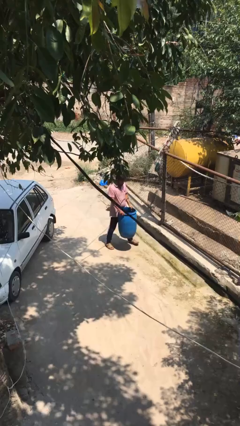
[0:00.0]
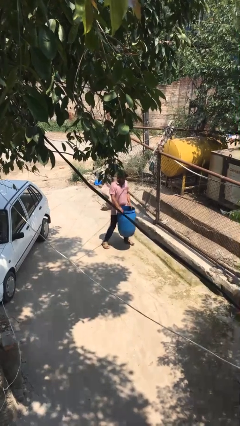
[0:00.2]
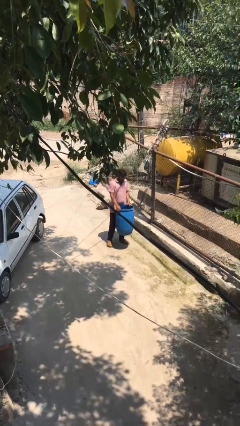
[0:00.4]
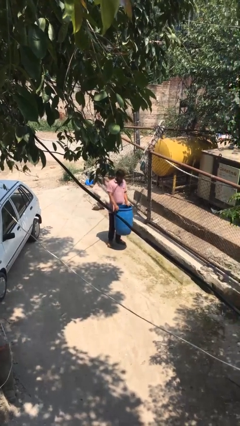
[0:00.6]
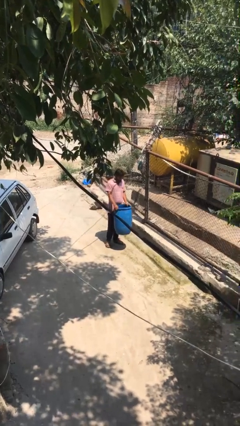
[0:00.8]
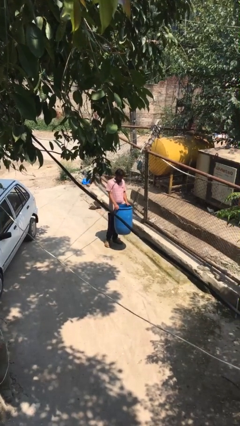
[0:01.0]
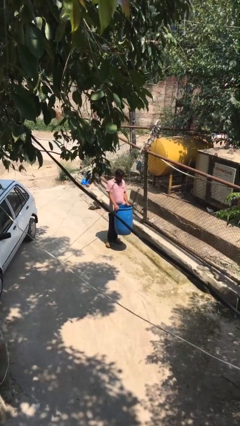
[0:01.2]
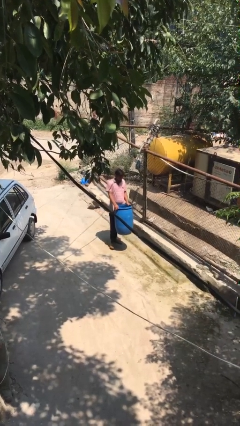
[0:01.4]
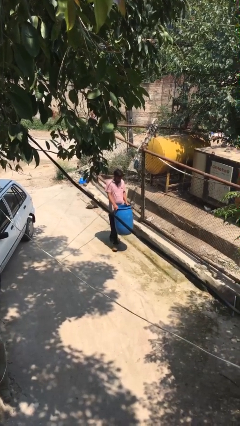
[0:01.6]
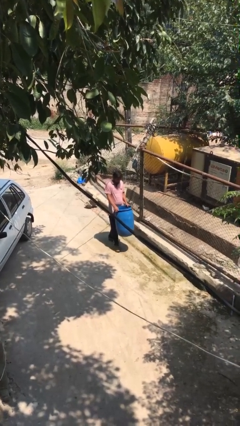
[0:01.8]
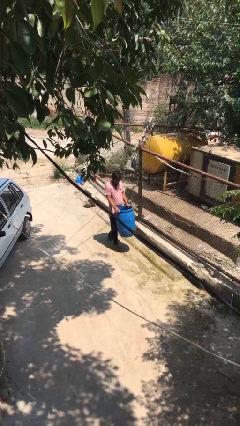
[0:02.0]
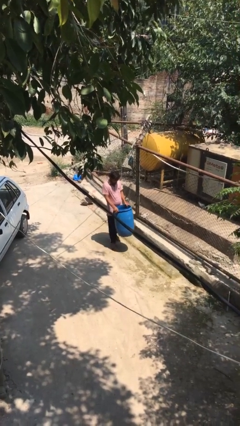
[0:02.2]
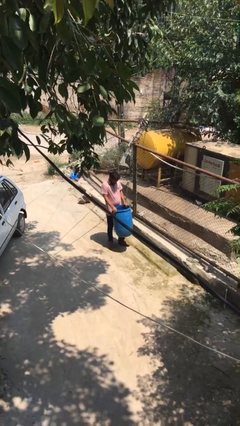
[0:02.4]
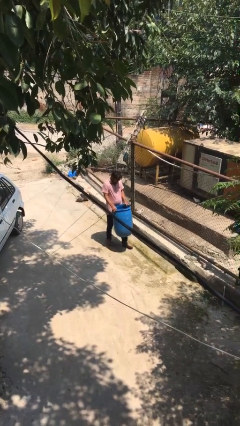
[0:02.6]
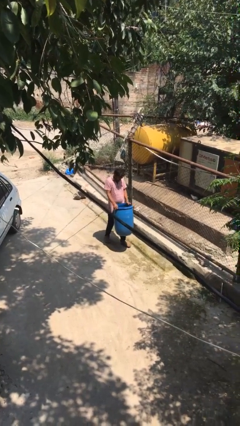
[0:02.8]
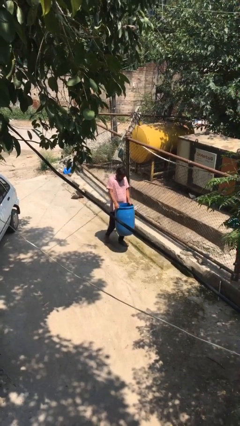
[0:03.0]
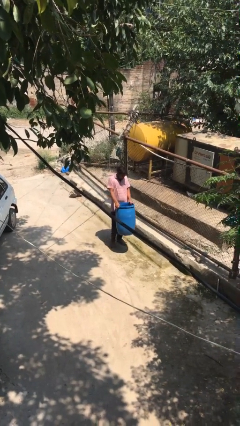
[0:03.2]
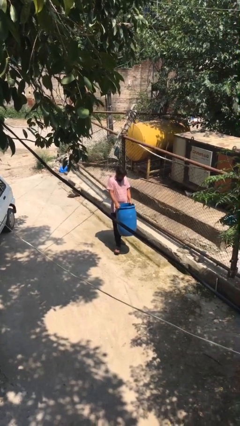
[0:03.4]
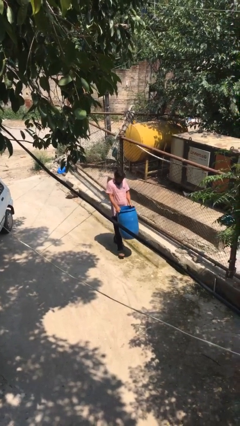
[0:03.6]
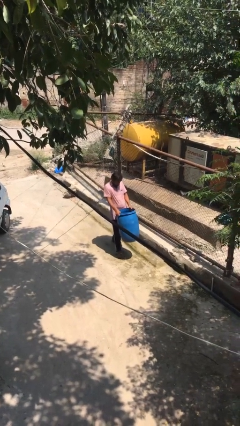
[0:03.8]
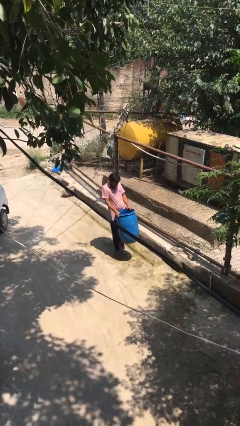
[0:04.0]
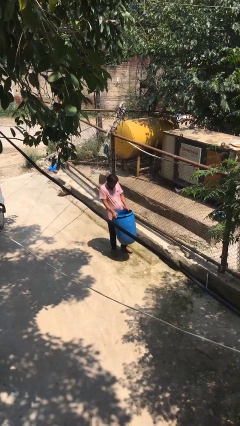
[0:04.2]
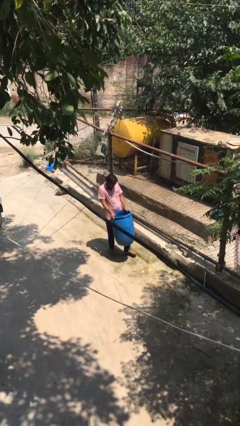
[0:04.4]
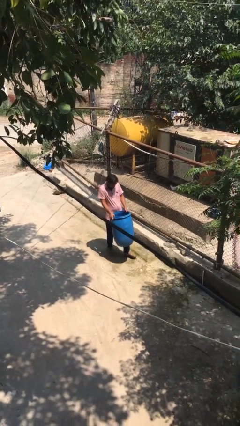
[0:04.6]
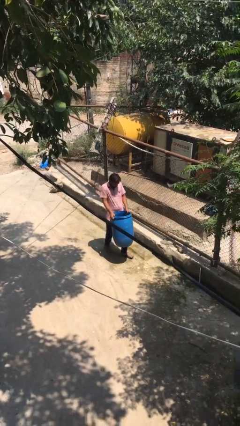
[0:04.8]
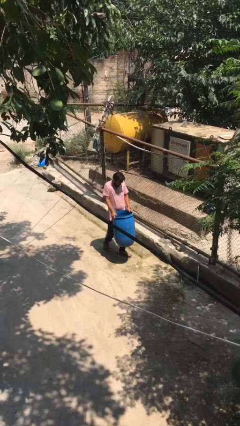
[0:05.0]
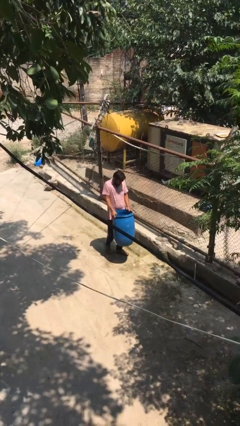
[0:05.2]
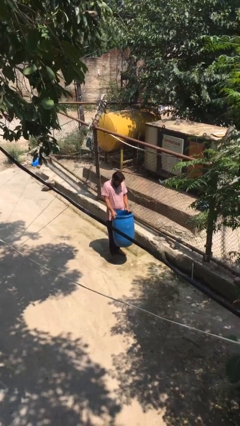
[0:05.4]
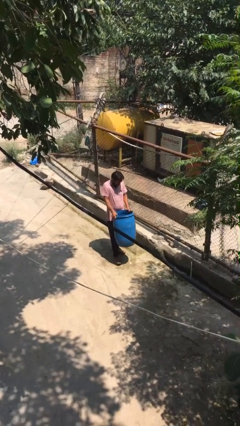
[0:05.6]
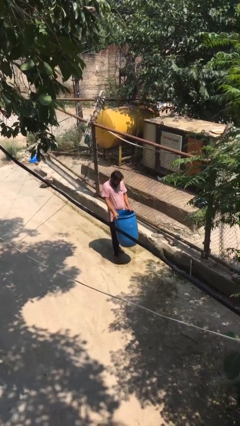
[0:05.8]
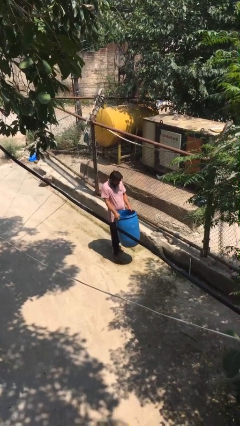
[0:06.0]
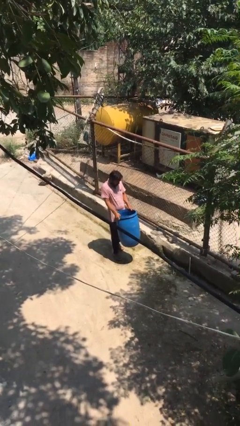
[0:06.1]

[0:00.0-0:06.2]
person carries heavy object

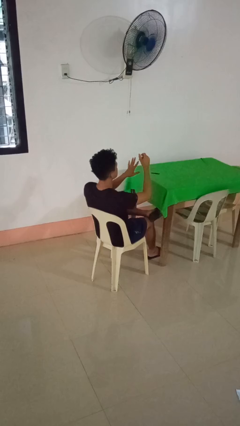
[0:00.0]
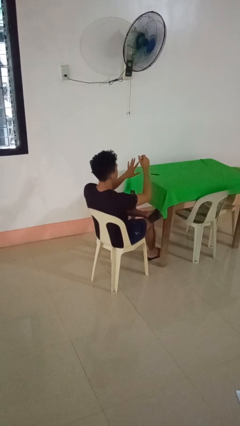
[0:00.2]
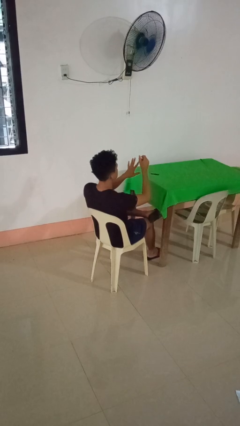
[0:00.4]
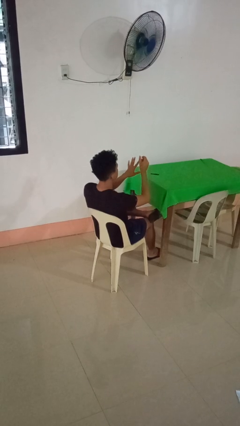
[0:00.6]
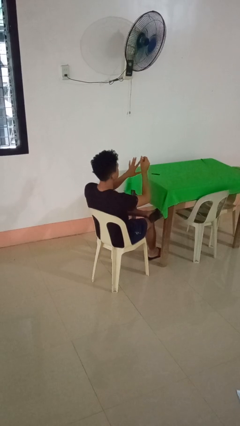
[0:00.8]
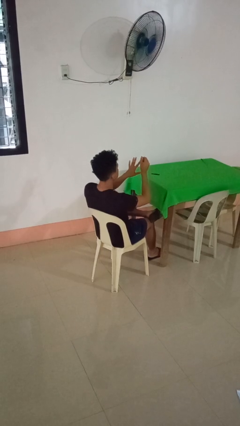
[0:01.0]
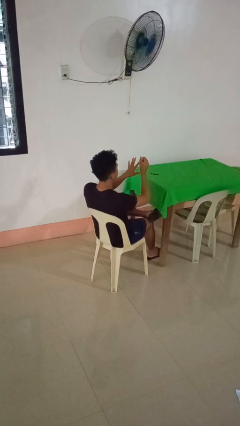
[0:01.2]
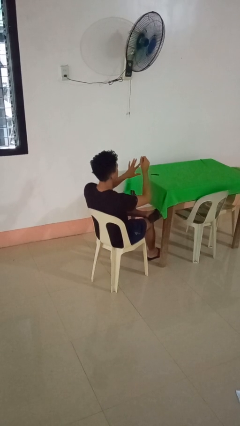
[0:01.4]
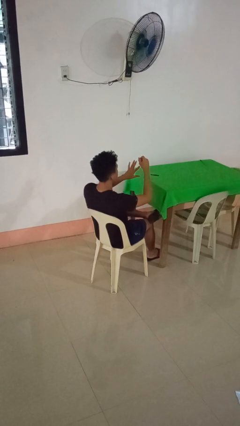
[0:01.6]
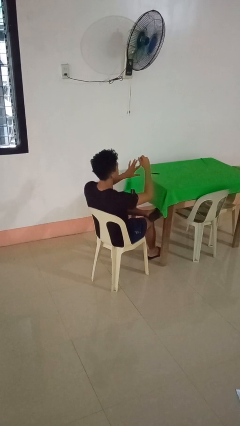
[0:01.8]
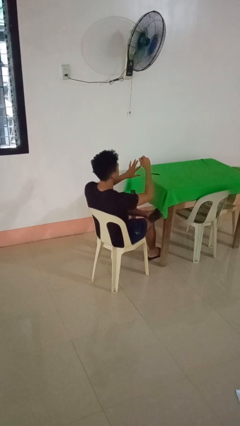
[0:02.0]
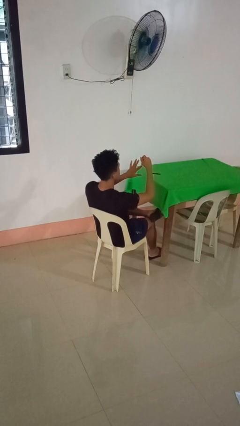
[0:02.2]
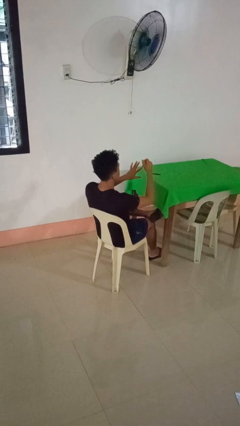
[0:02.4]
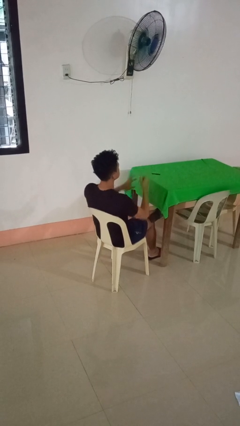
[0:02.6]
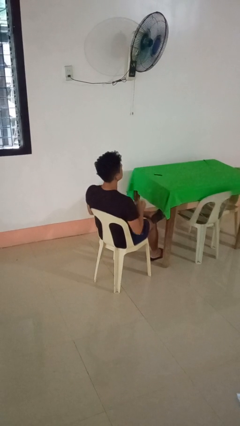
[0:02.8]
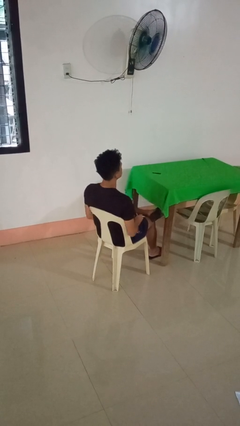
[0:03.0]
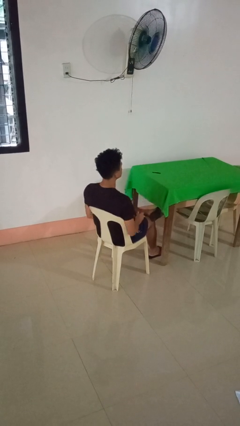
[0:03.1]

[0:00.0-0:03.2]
person clips fingernails

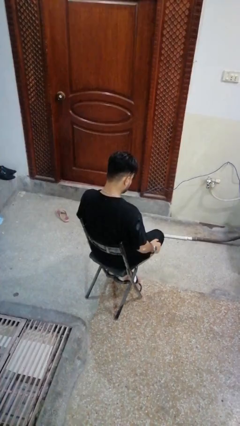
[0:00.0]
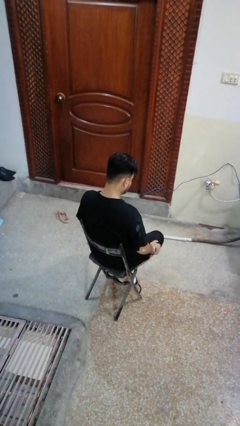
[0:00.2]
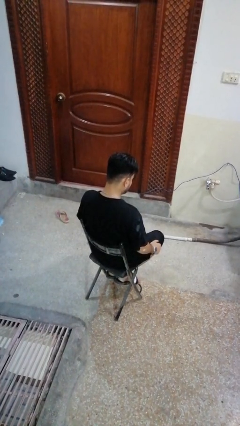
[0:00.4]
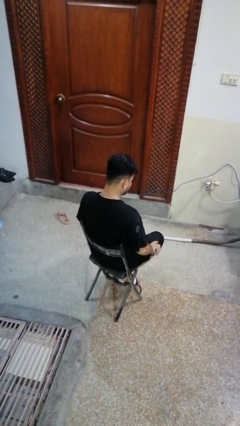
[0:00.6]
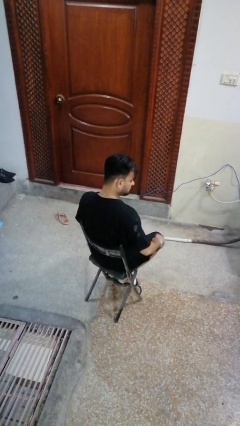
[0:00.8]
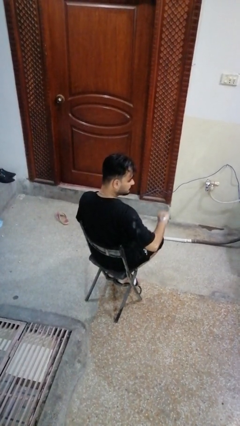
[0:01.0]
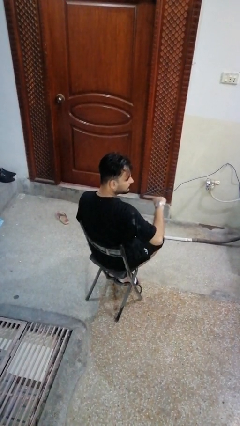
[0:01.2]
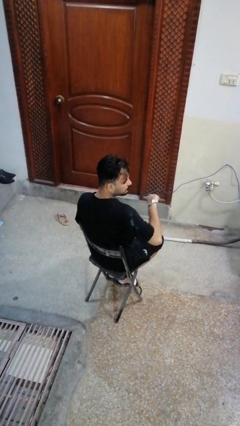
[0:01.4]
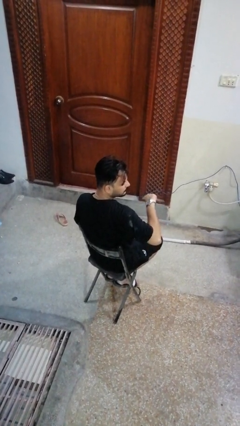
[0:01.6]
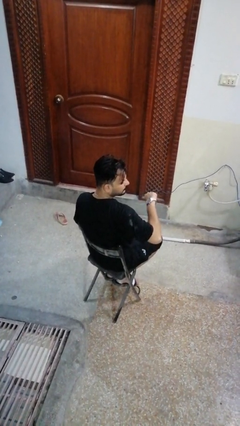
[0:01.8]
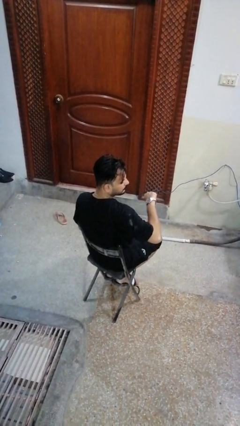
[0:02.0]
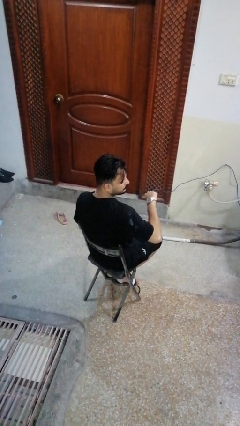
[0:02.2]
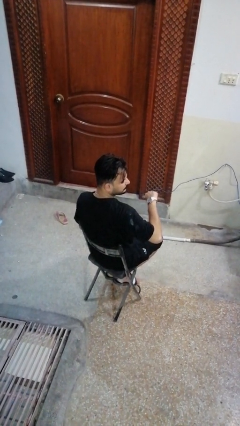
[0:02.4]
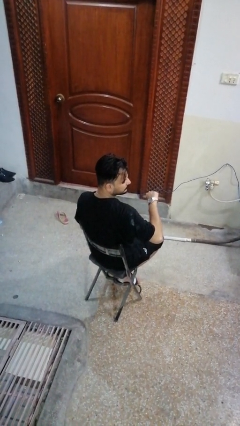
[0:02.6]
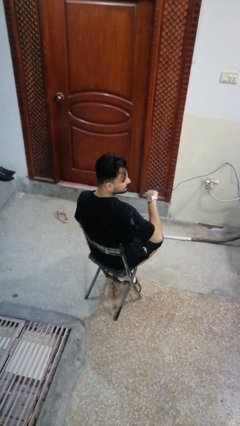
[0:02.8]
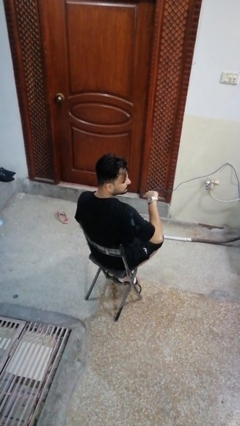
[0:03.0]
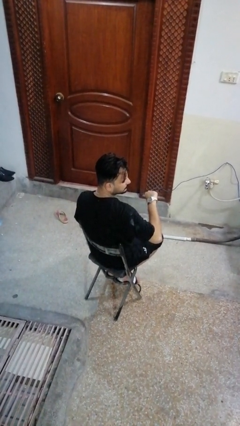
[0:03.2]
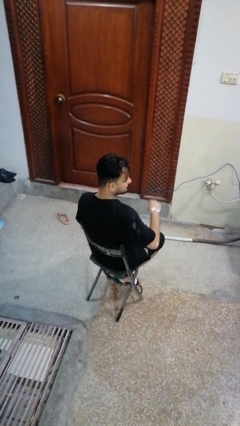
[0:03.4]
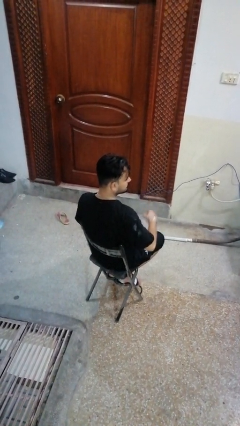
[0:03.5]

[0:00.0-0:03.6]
person looks at wristwatch

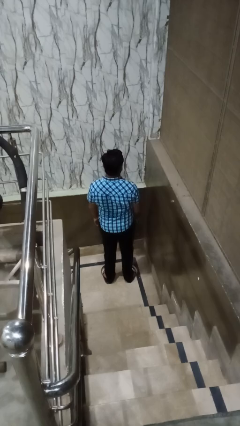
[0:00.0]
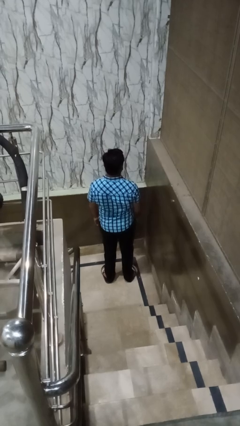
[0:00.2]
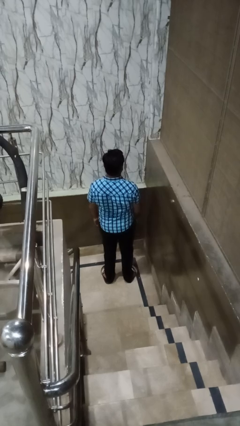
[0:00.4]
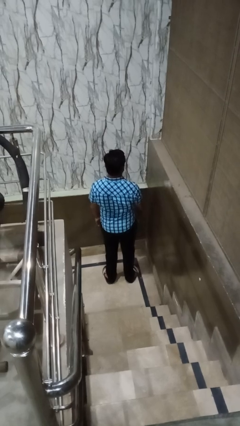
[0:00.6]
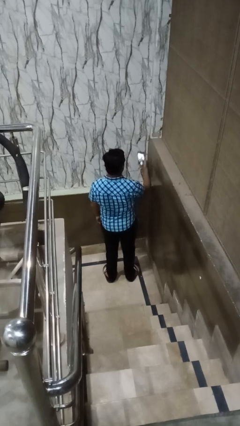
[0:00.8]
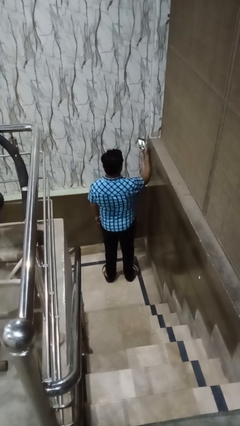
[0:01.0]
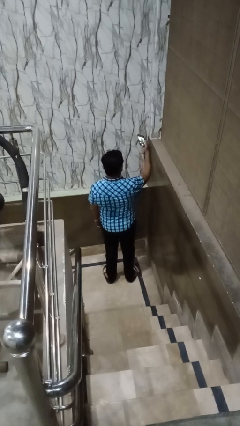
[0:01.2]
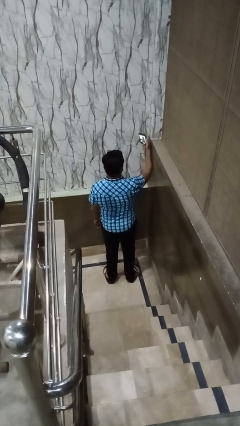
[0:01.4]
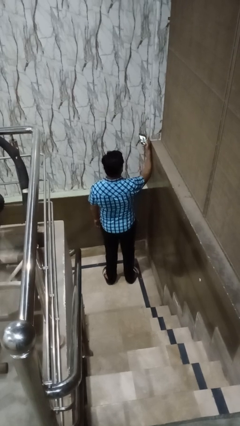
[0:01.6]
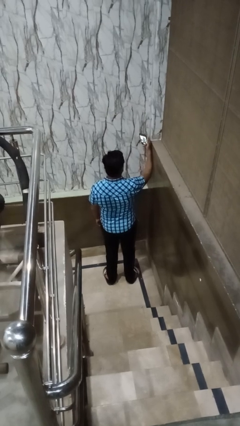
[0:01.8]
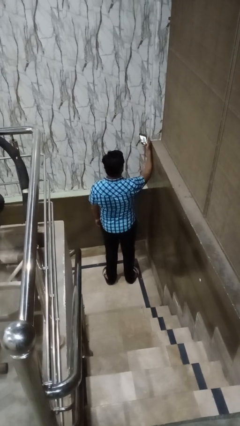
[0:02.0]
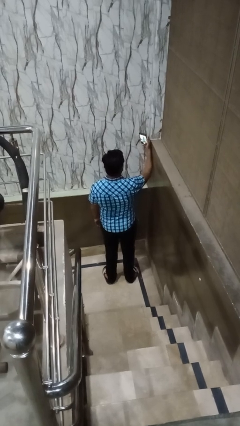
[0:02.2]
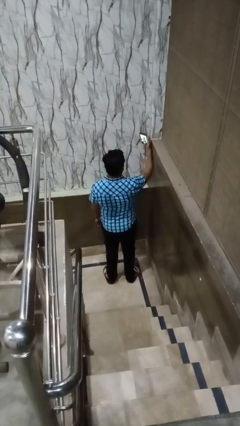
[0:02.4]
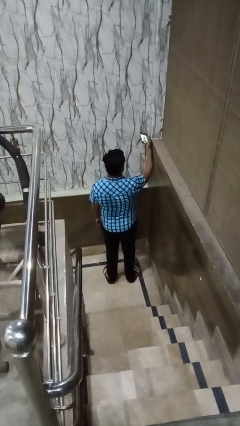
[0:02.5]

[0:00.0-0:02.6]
person takes selfie

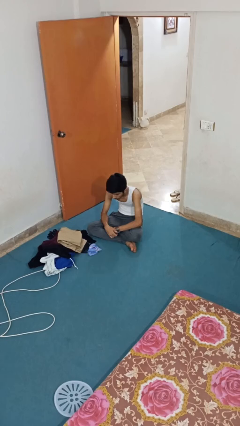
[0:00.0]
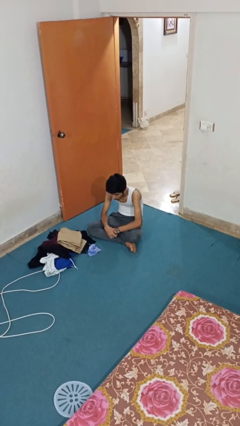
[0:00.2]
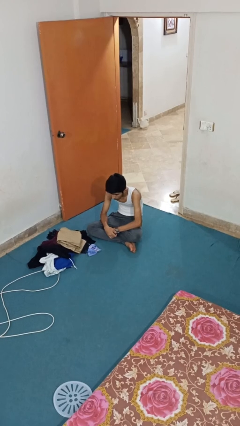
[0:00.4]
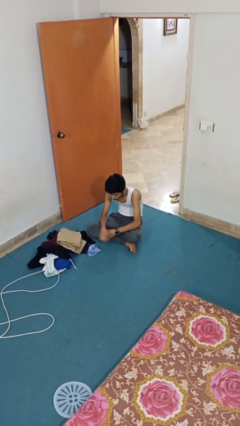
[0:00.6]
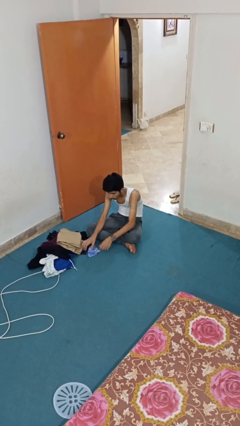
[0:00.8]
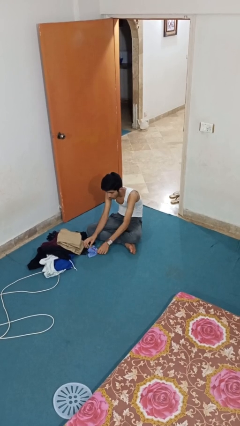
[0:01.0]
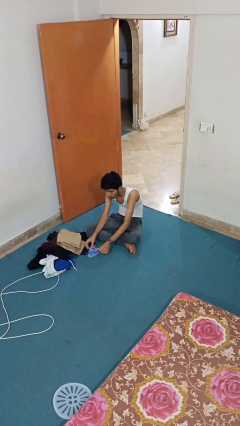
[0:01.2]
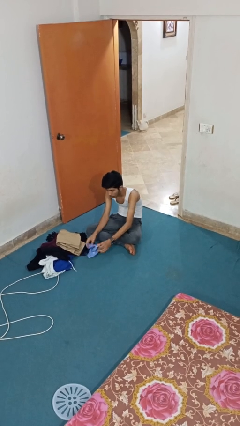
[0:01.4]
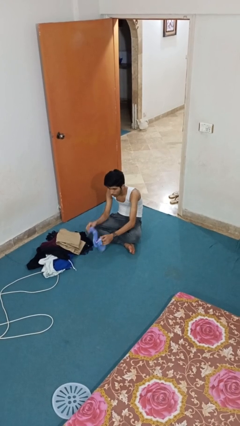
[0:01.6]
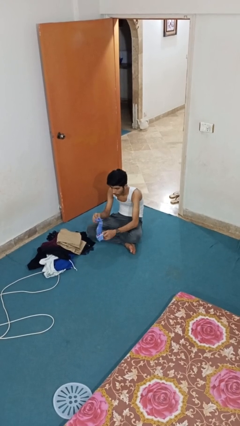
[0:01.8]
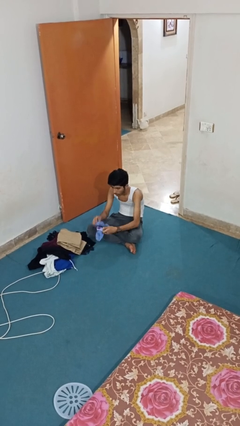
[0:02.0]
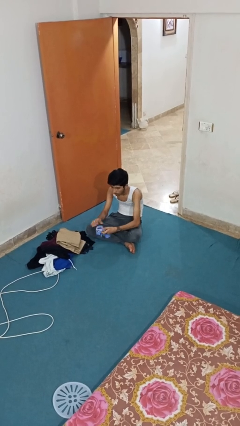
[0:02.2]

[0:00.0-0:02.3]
person folds socks
